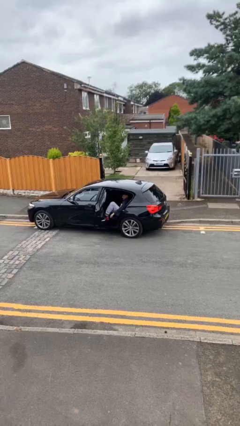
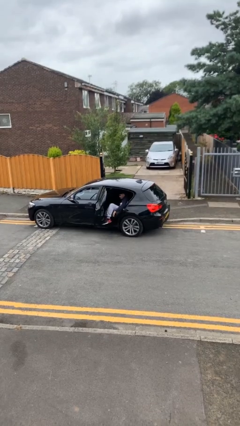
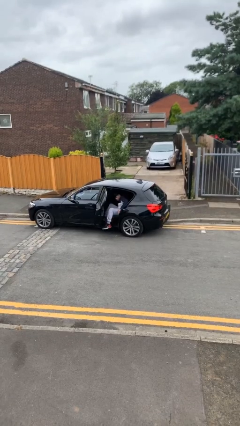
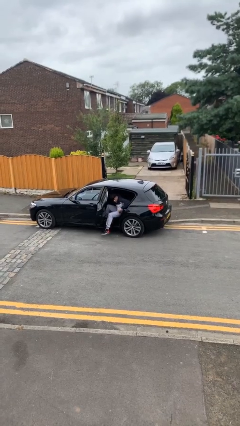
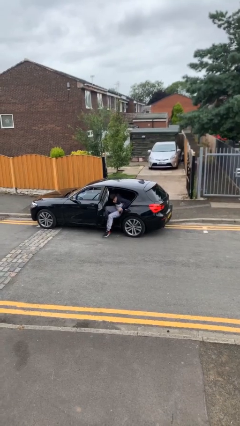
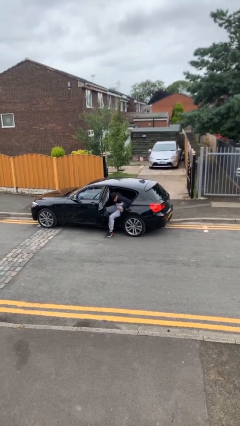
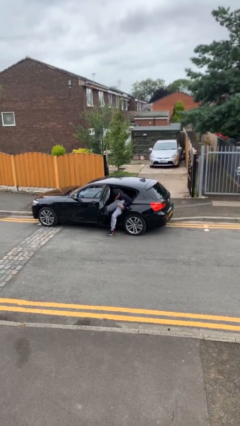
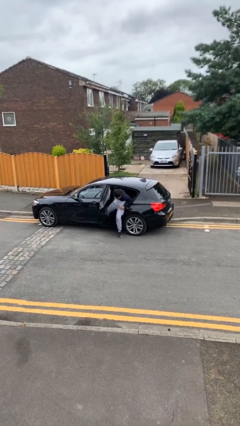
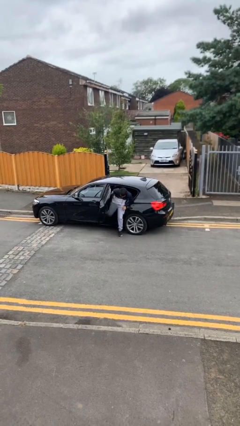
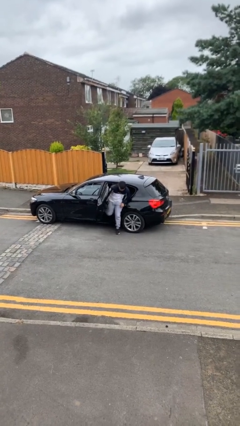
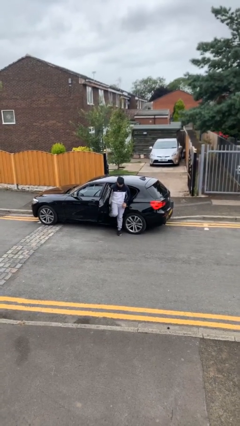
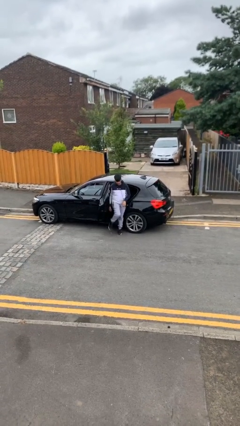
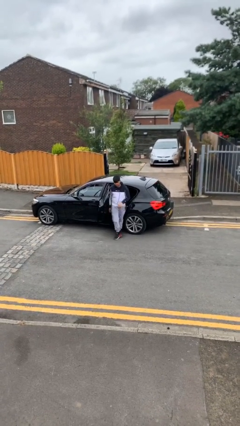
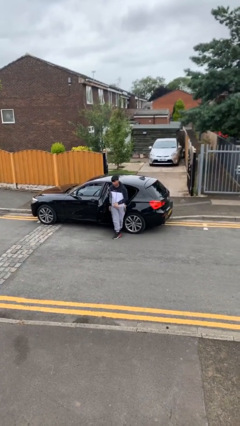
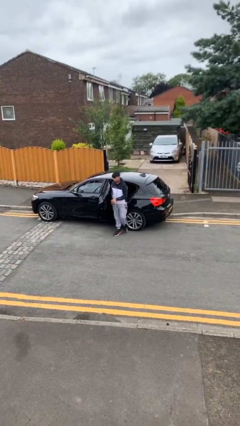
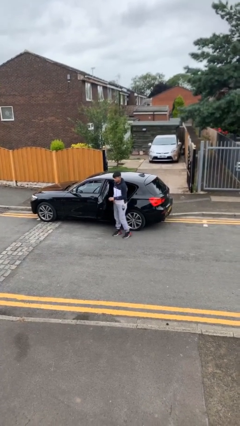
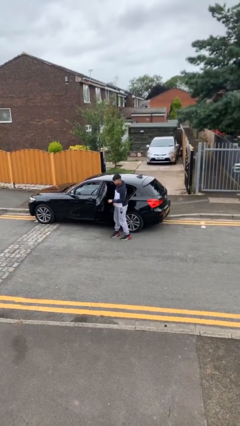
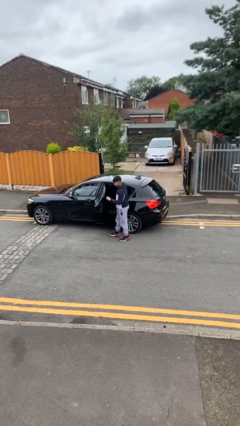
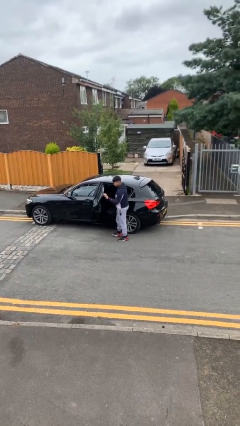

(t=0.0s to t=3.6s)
person exits car

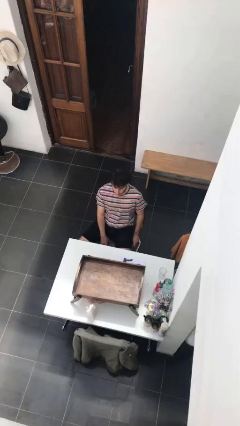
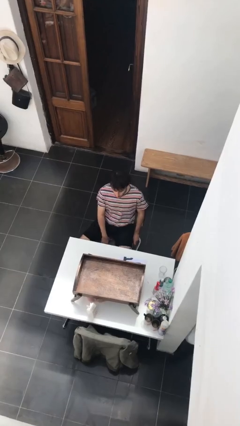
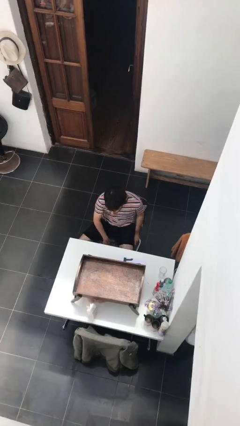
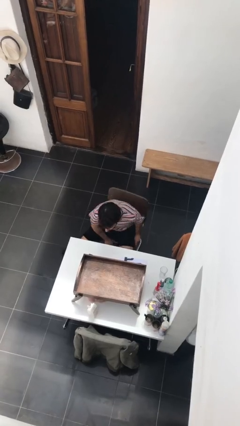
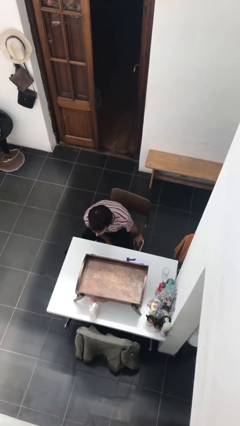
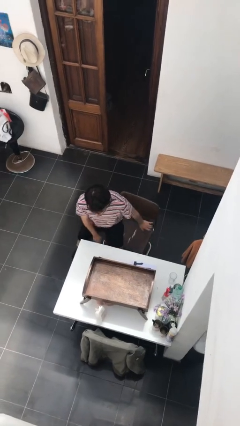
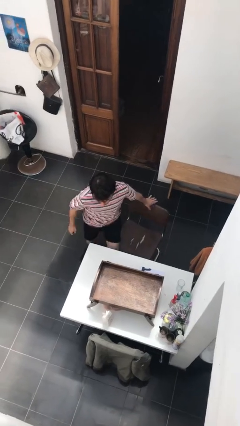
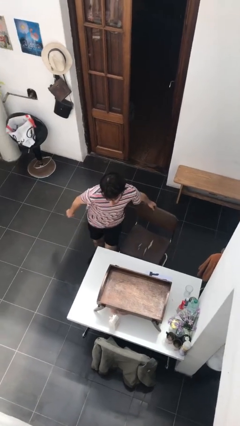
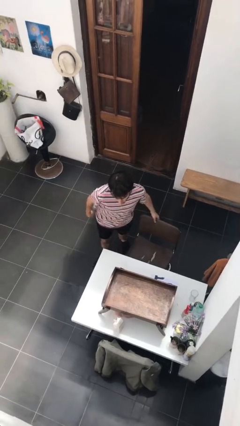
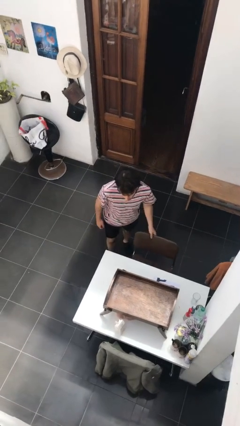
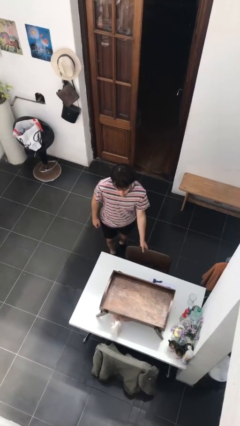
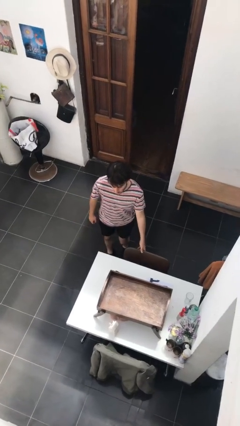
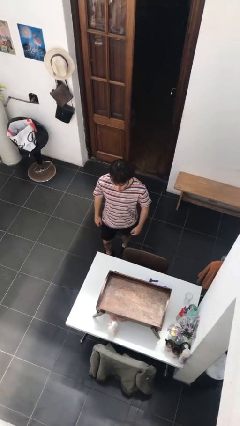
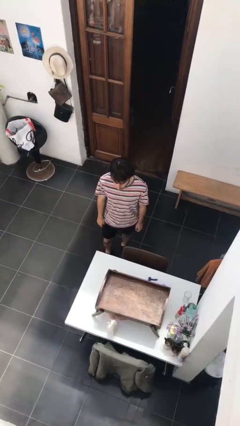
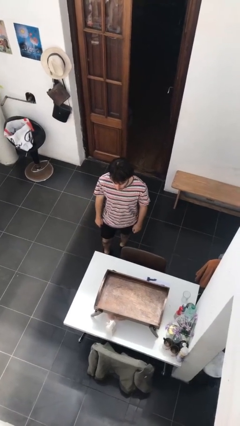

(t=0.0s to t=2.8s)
person stands up

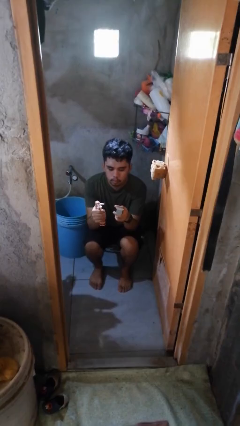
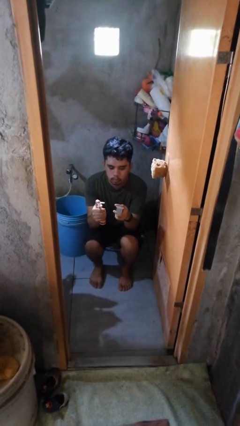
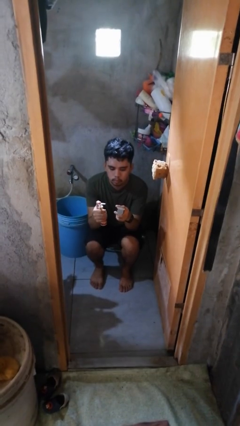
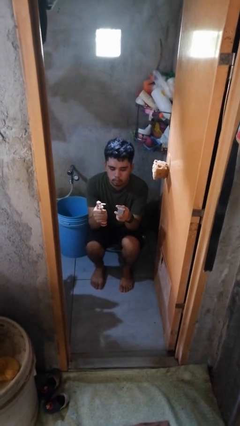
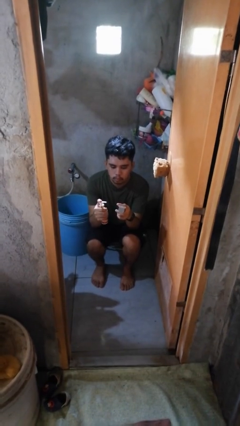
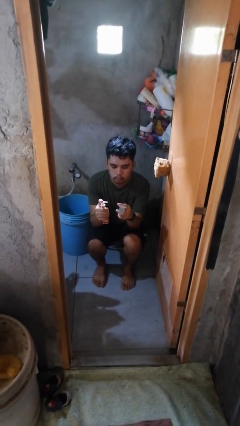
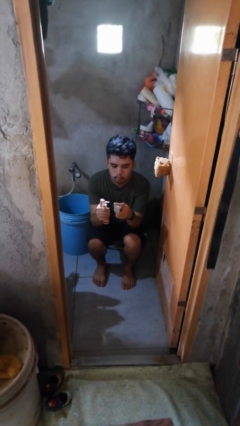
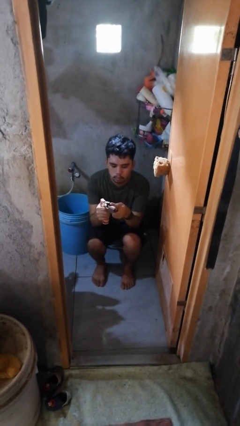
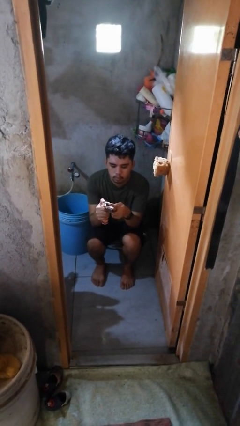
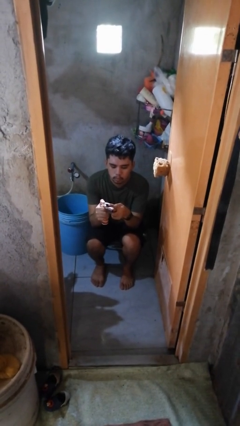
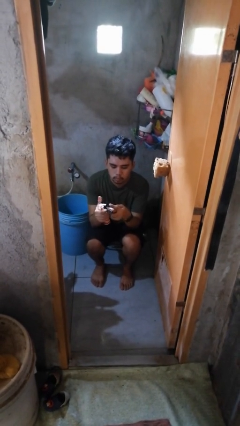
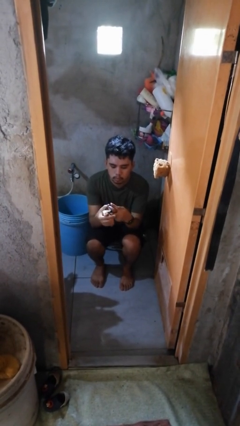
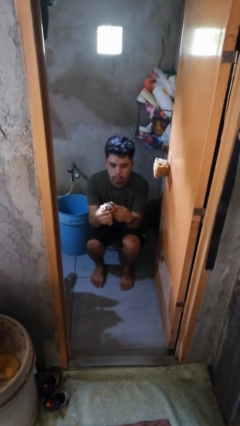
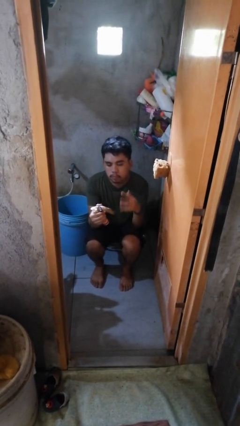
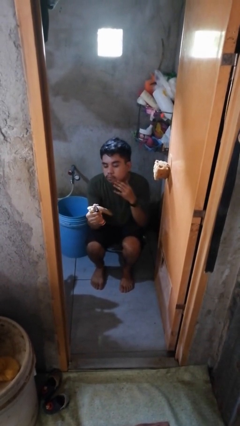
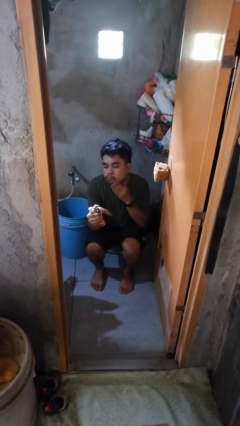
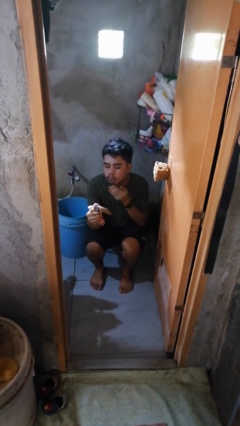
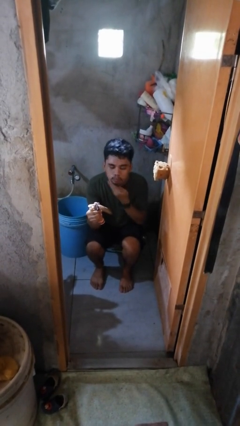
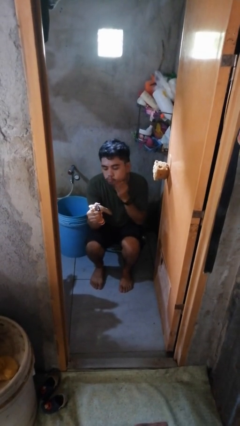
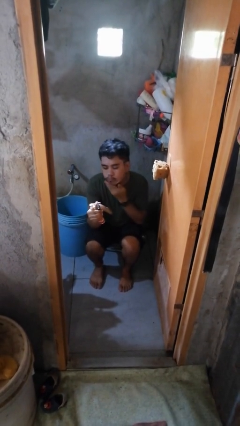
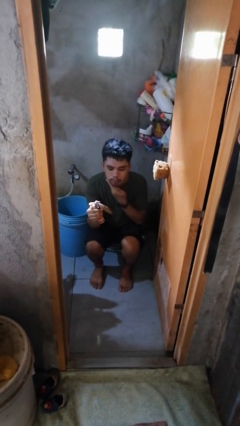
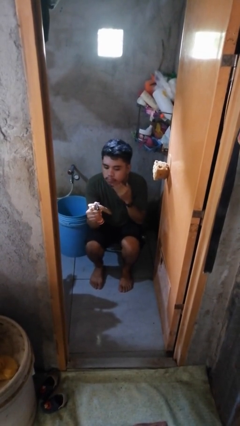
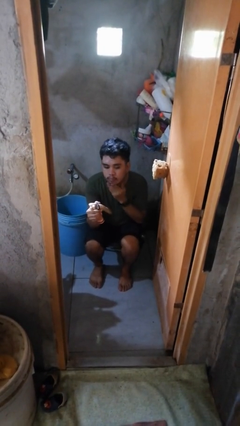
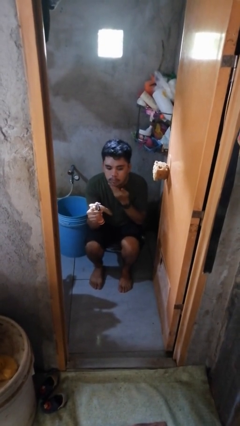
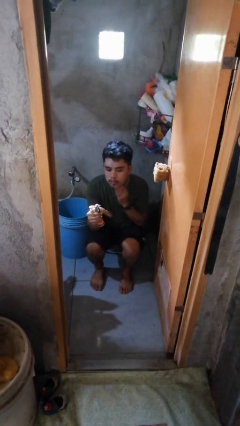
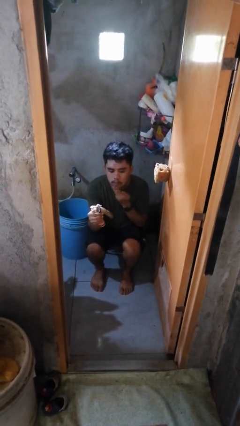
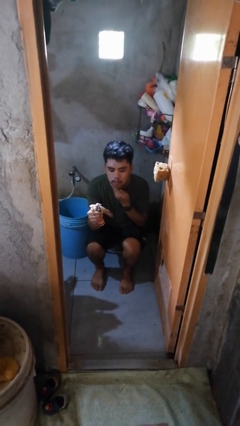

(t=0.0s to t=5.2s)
person applies shaving cream

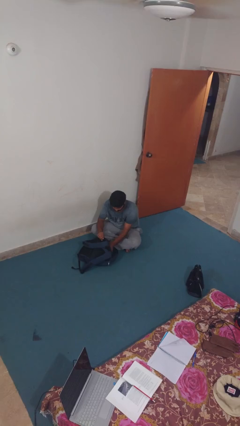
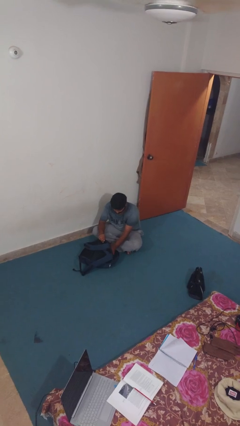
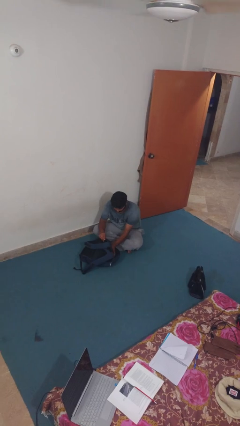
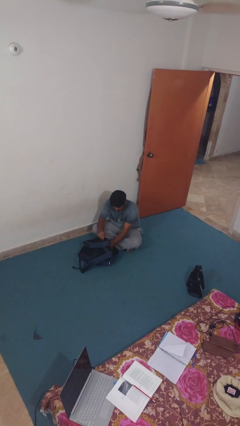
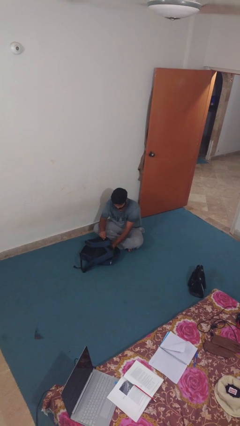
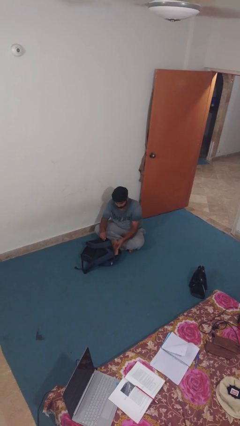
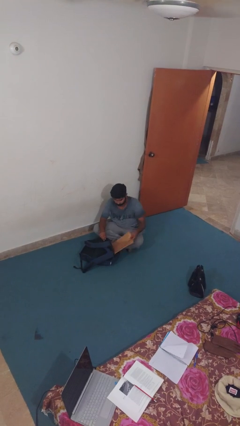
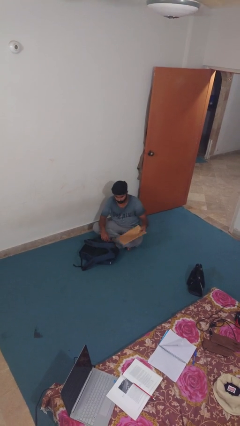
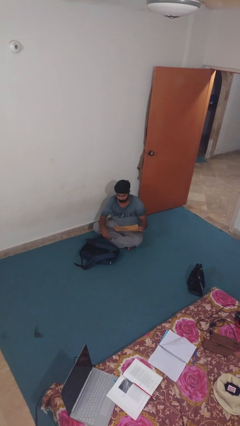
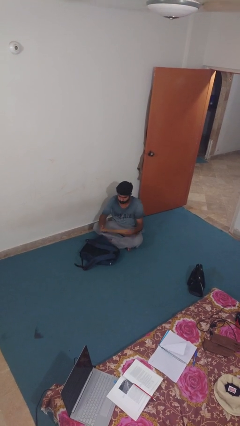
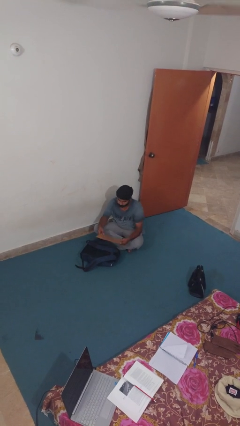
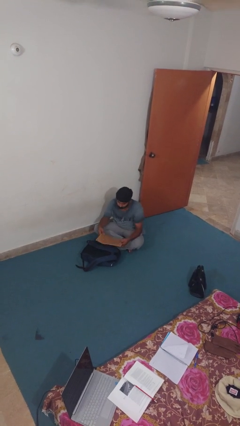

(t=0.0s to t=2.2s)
person takes object from backpack

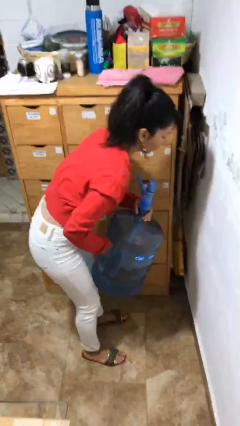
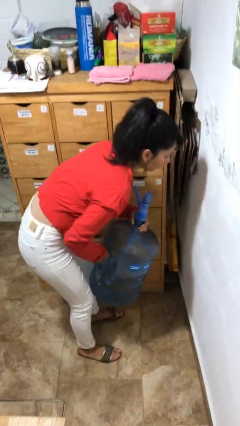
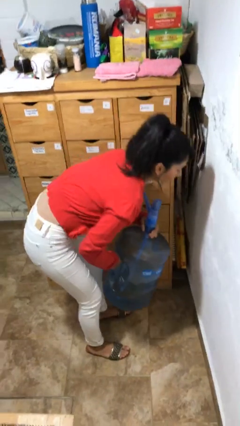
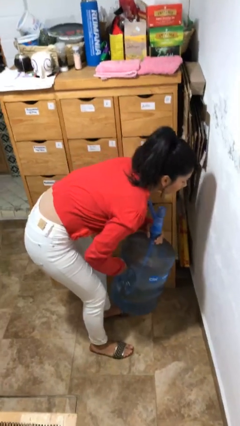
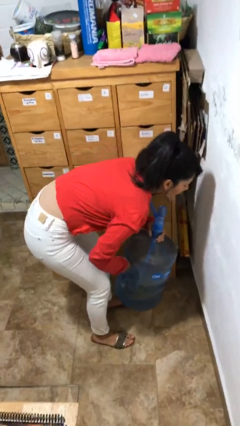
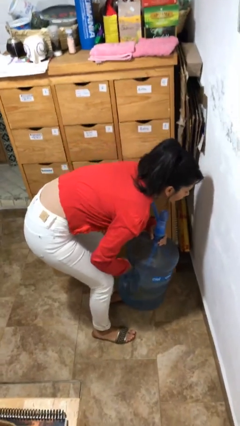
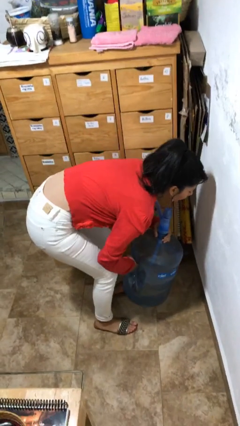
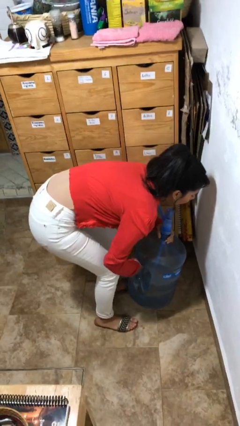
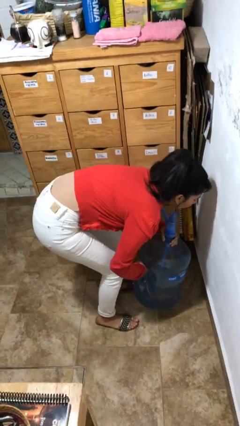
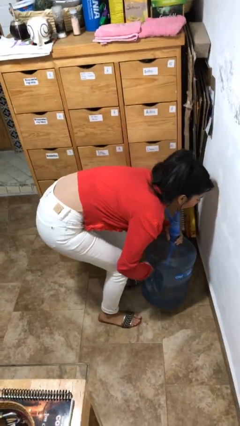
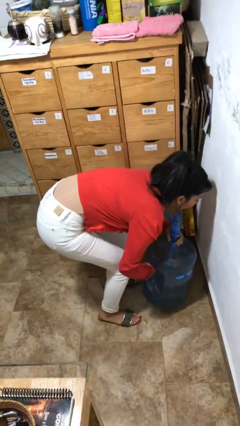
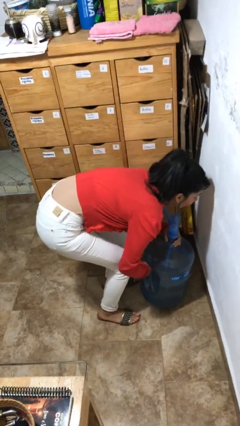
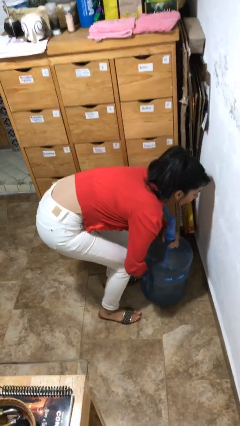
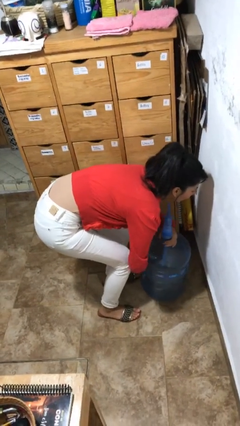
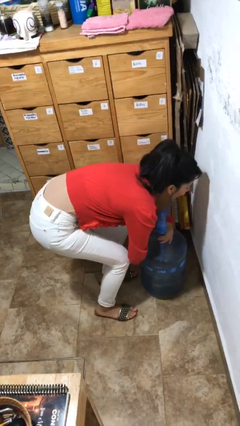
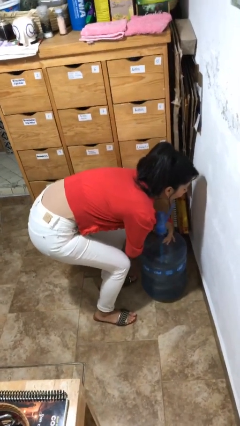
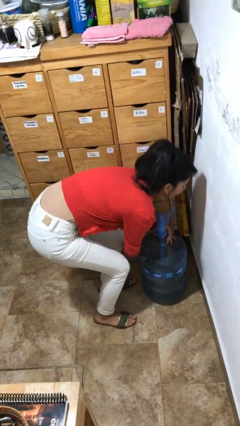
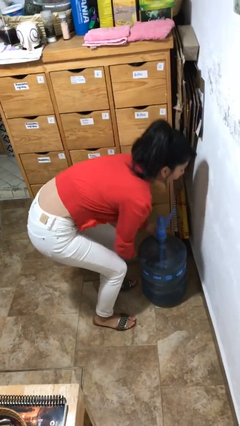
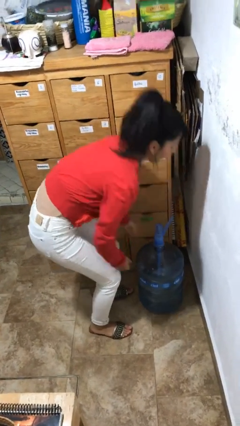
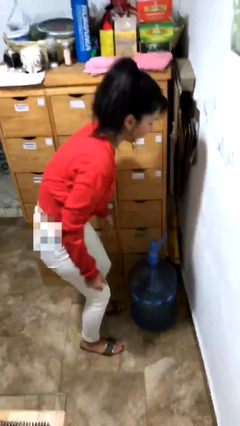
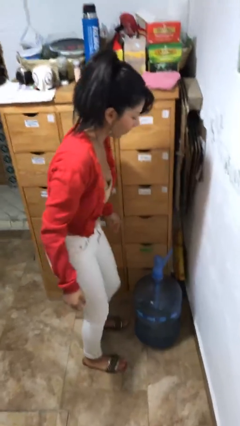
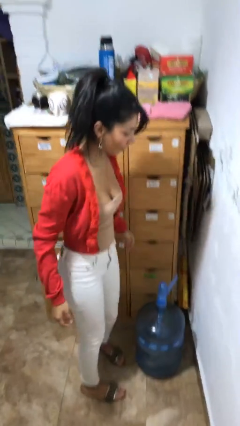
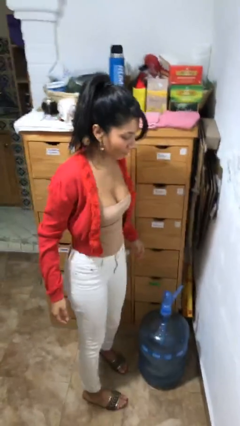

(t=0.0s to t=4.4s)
person puts down object on floor
